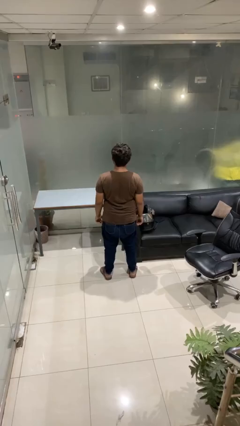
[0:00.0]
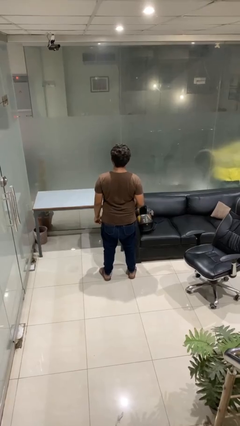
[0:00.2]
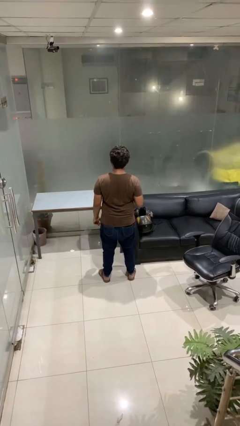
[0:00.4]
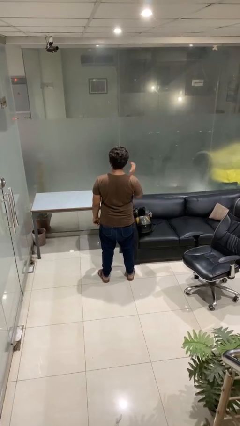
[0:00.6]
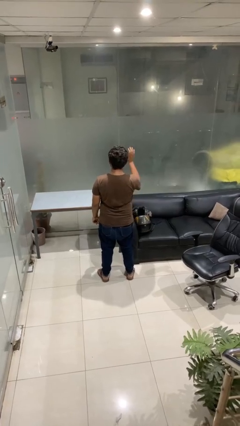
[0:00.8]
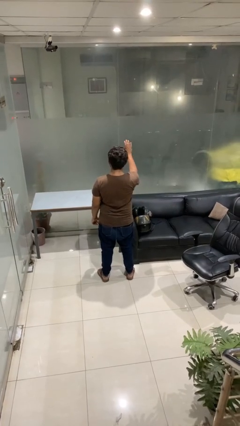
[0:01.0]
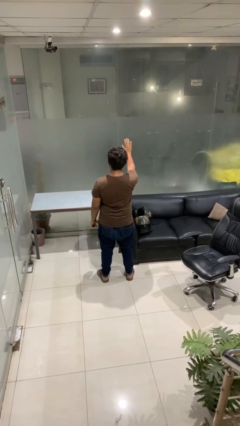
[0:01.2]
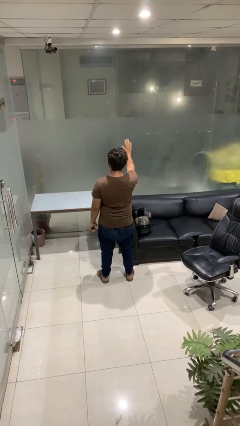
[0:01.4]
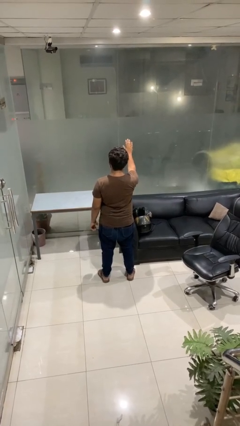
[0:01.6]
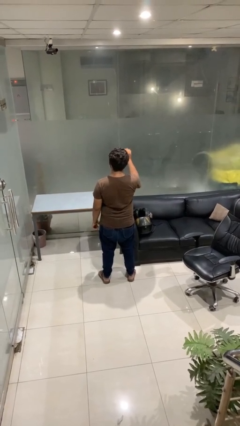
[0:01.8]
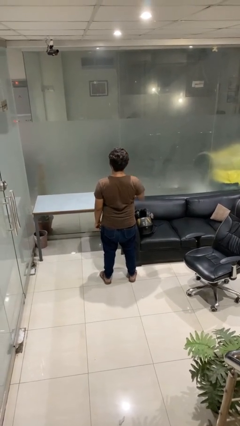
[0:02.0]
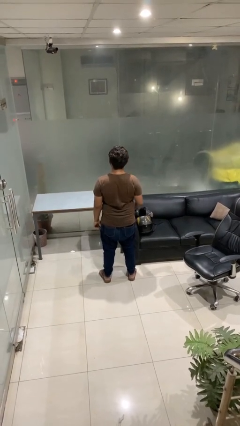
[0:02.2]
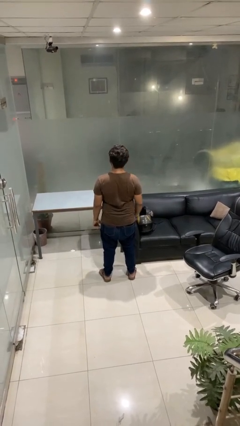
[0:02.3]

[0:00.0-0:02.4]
person gestures stop

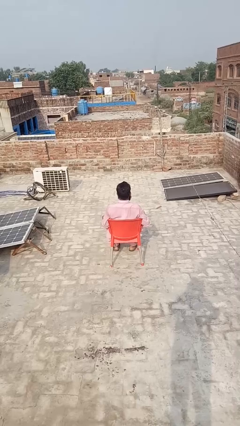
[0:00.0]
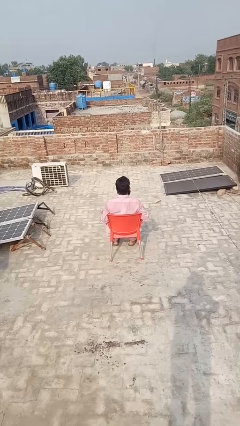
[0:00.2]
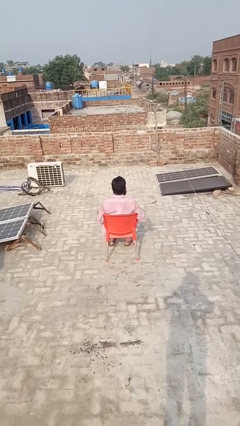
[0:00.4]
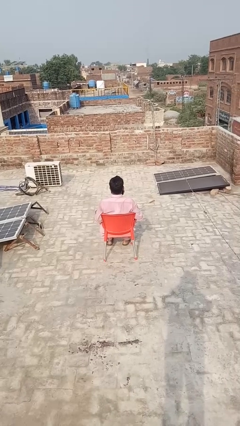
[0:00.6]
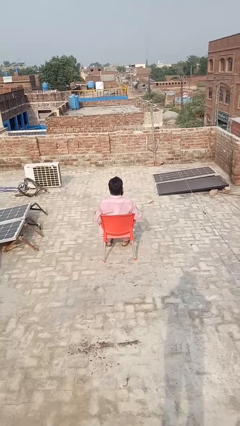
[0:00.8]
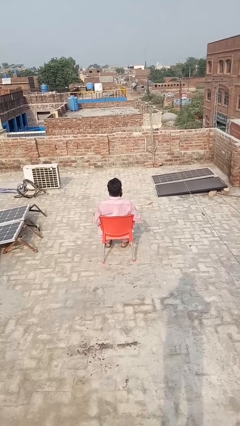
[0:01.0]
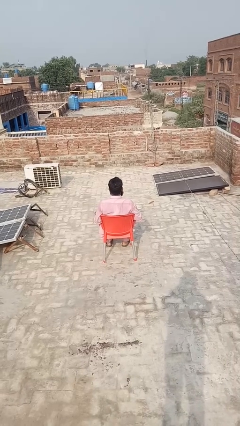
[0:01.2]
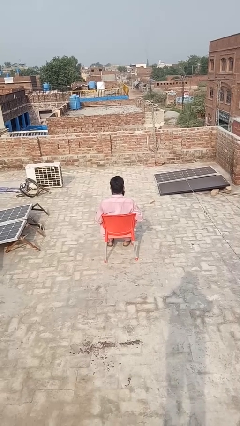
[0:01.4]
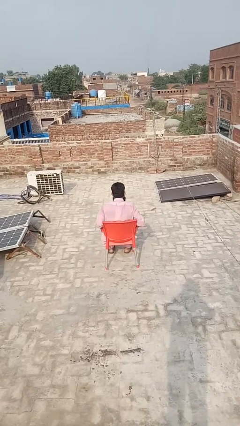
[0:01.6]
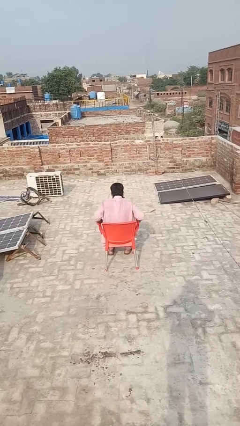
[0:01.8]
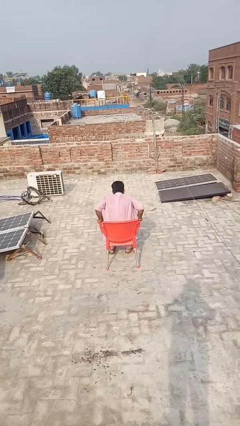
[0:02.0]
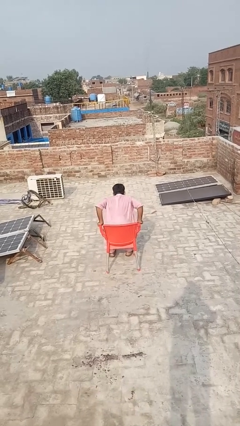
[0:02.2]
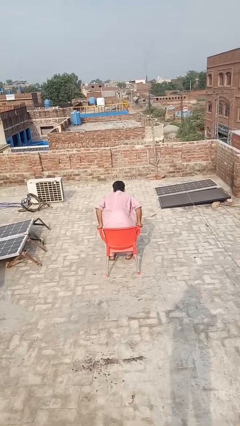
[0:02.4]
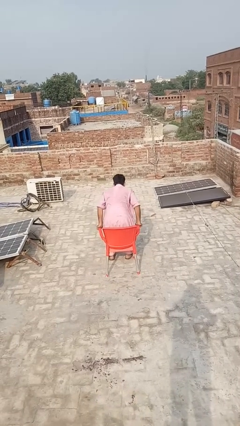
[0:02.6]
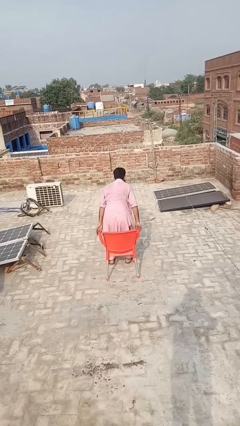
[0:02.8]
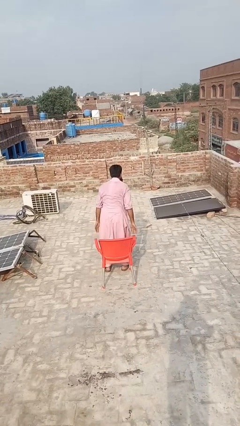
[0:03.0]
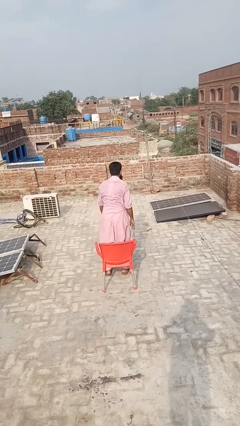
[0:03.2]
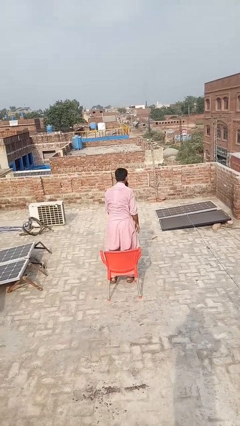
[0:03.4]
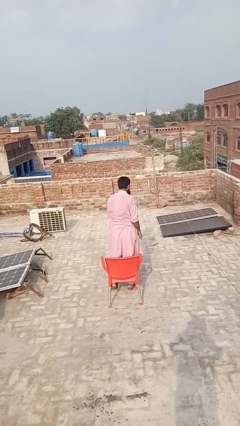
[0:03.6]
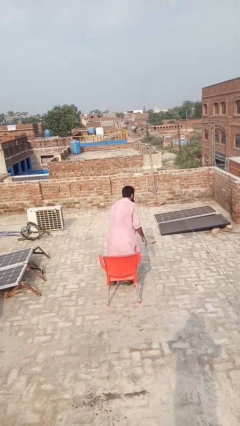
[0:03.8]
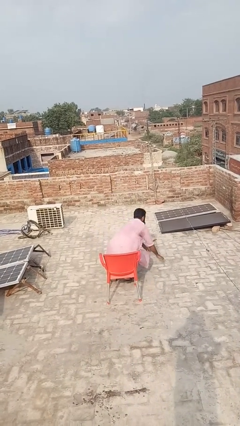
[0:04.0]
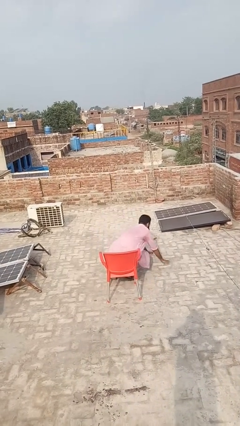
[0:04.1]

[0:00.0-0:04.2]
person falls from chair

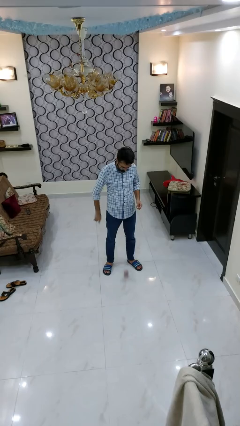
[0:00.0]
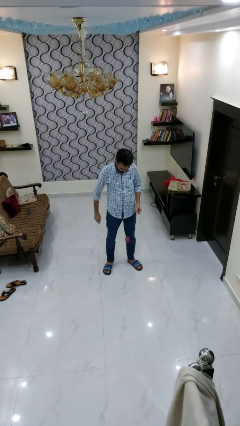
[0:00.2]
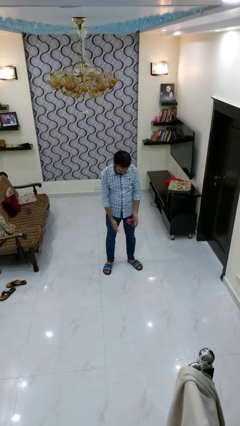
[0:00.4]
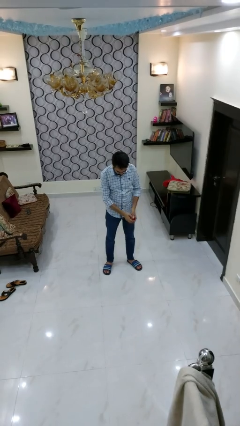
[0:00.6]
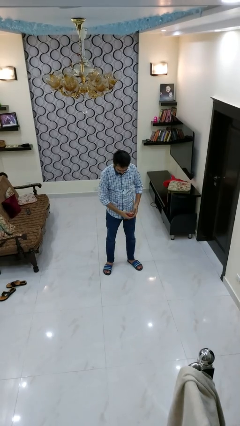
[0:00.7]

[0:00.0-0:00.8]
person bounces ball on floor

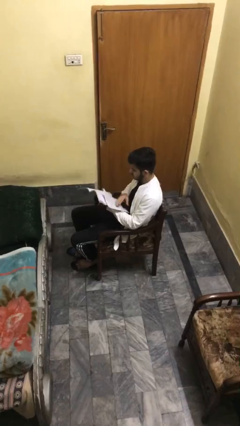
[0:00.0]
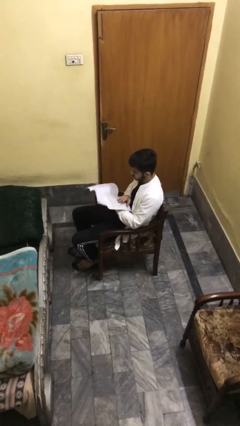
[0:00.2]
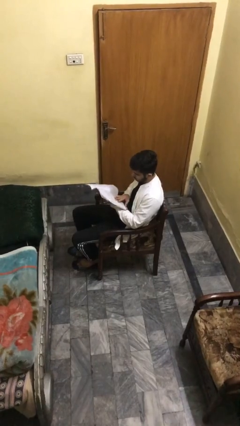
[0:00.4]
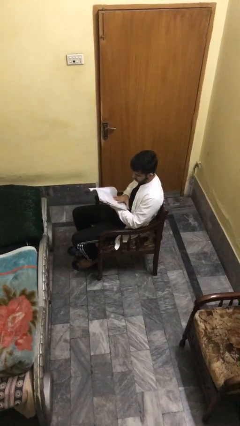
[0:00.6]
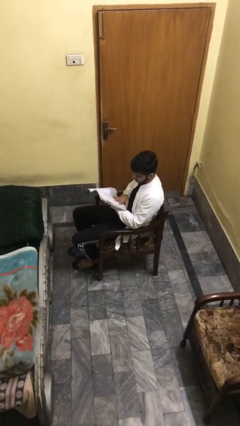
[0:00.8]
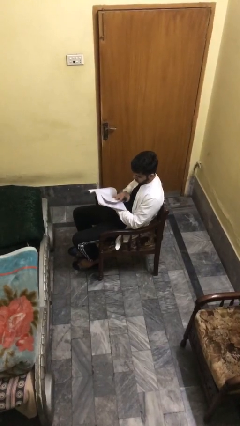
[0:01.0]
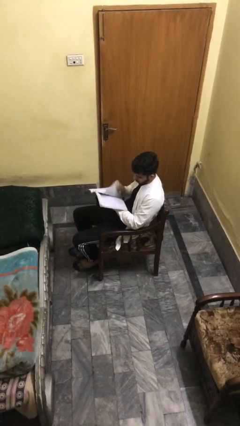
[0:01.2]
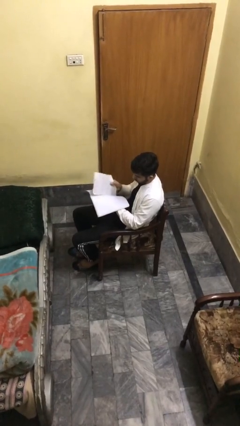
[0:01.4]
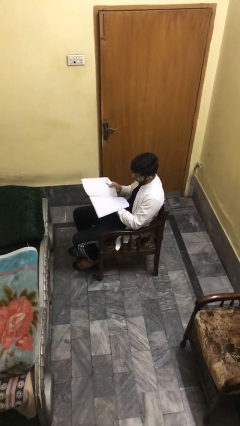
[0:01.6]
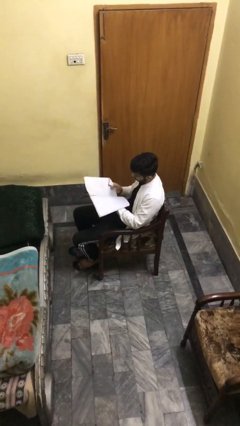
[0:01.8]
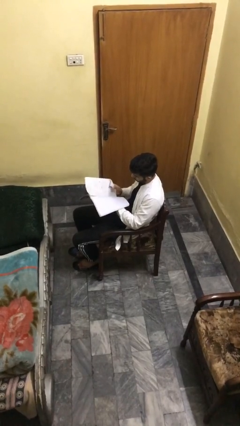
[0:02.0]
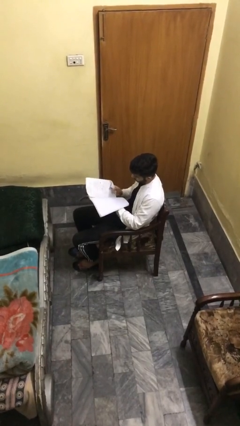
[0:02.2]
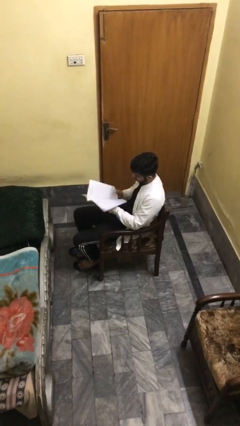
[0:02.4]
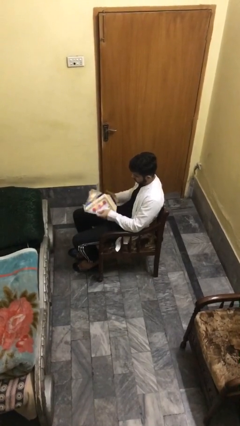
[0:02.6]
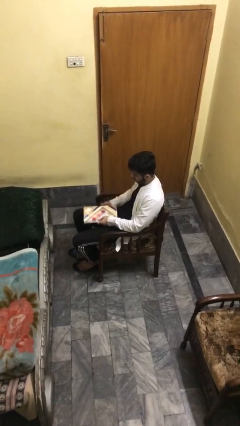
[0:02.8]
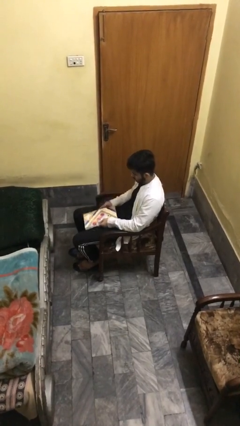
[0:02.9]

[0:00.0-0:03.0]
person reads document

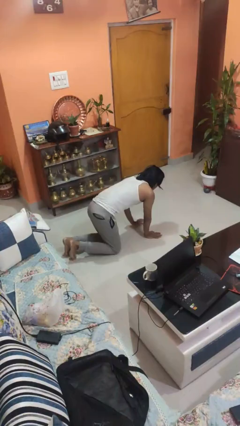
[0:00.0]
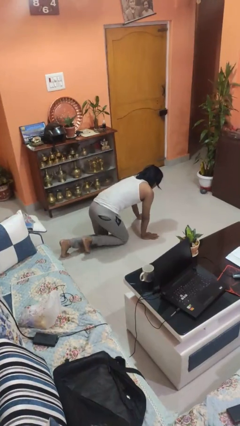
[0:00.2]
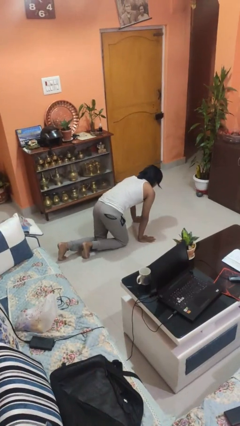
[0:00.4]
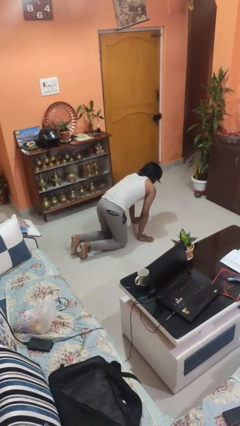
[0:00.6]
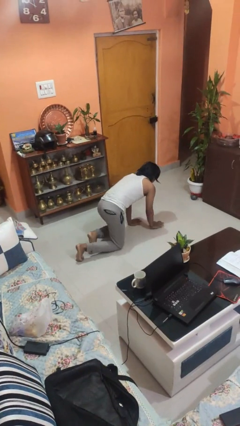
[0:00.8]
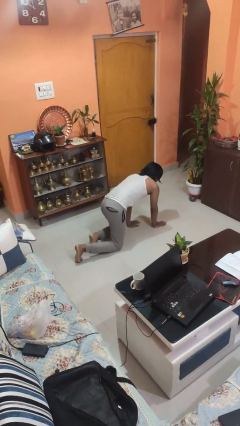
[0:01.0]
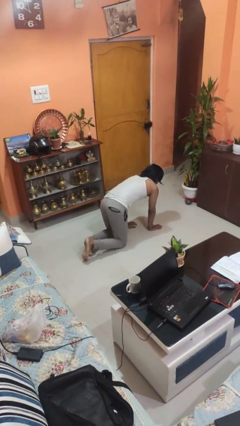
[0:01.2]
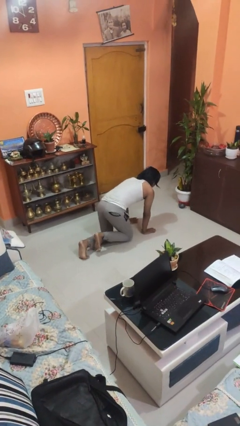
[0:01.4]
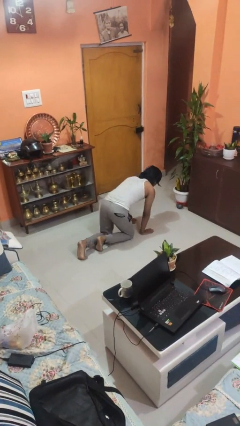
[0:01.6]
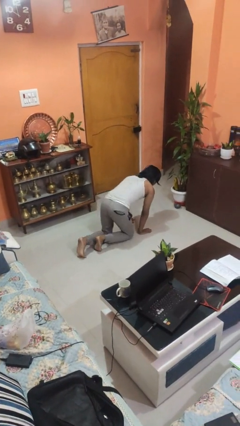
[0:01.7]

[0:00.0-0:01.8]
person crawls

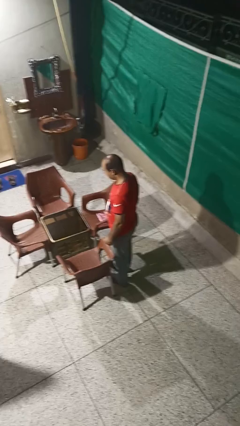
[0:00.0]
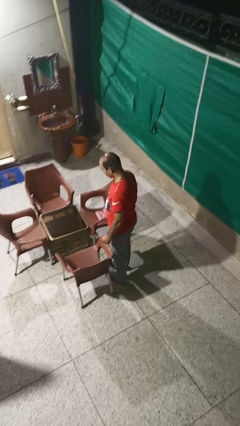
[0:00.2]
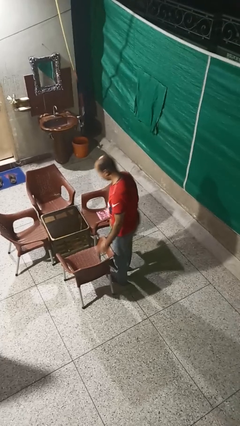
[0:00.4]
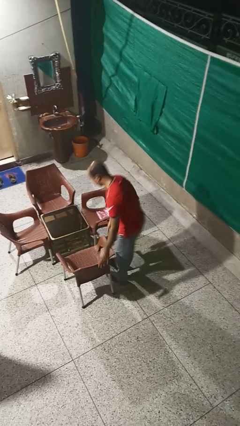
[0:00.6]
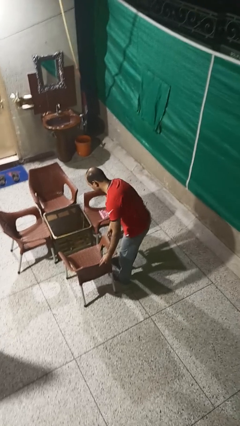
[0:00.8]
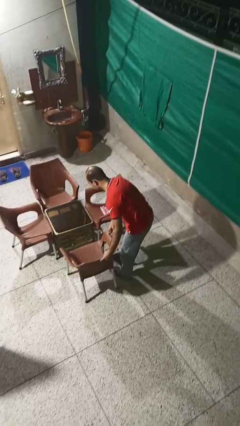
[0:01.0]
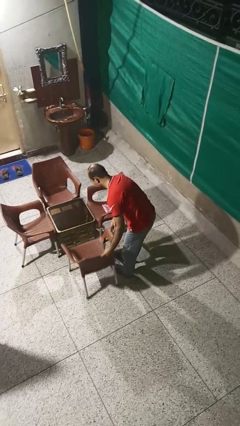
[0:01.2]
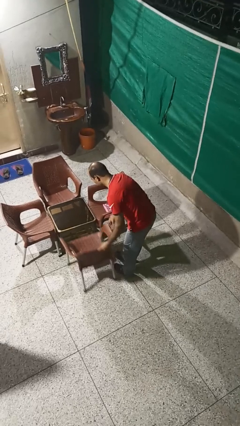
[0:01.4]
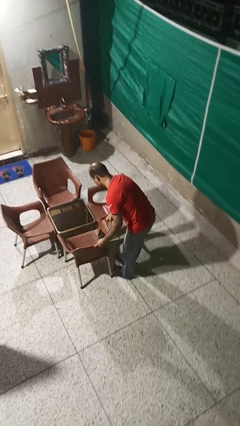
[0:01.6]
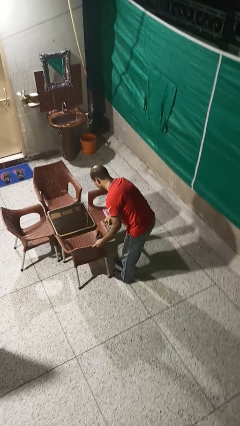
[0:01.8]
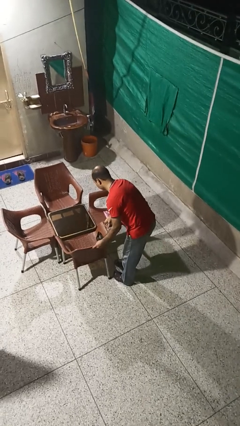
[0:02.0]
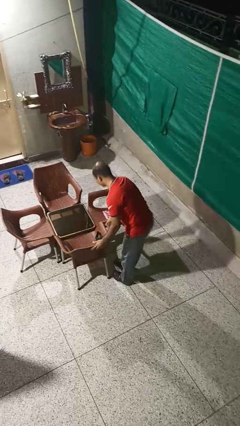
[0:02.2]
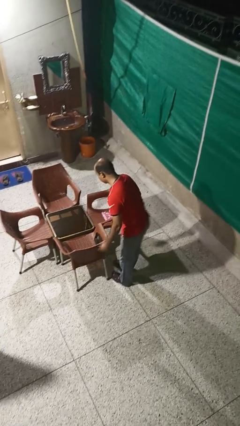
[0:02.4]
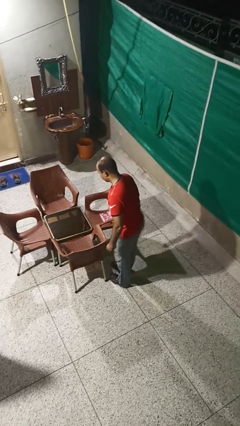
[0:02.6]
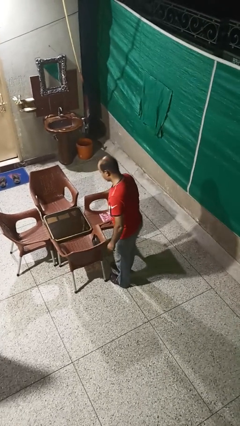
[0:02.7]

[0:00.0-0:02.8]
person pushes in chair

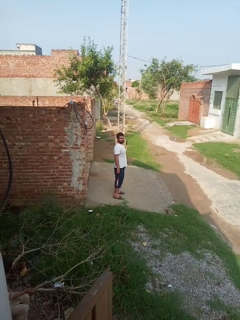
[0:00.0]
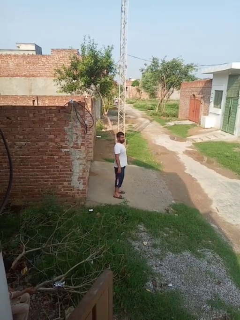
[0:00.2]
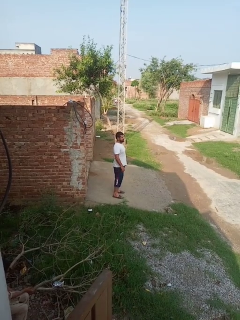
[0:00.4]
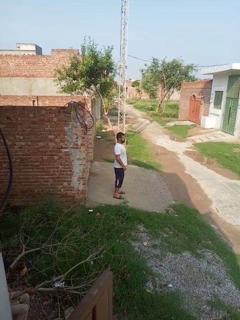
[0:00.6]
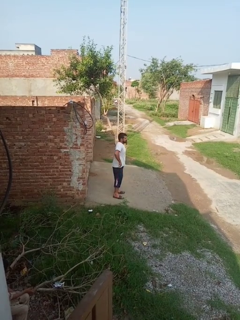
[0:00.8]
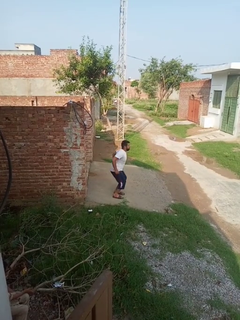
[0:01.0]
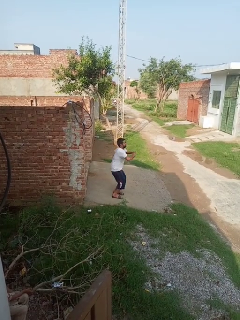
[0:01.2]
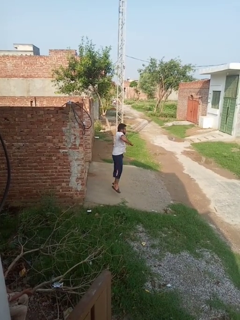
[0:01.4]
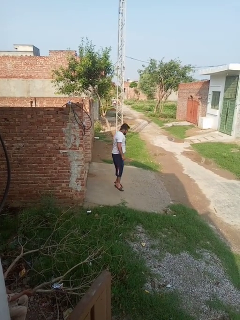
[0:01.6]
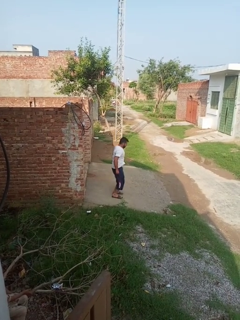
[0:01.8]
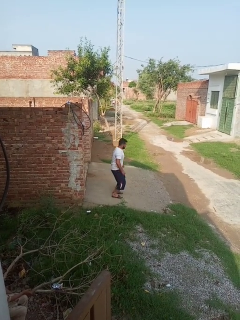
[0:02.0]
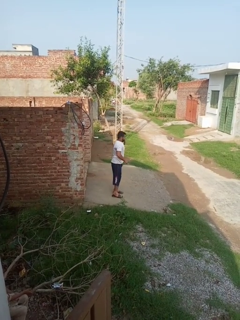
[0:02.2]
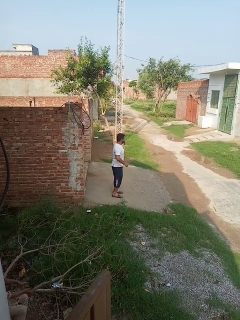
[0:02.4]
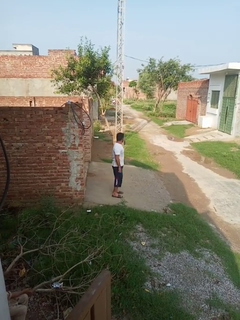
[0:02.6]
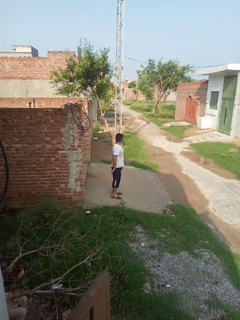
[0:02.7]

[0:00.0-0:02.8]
person jumps

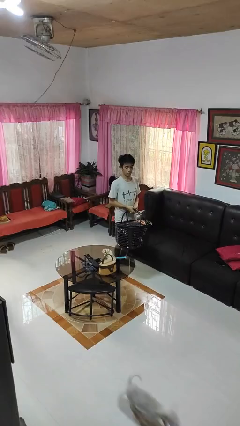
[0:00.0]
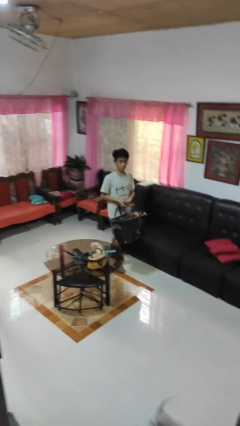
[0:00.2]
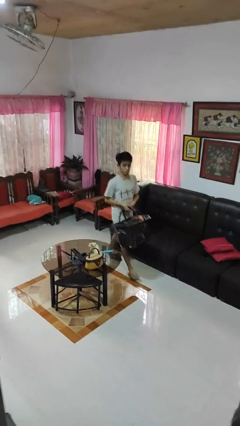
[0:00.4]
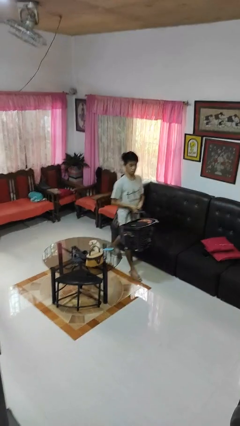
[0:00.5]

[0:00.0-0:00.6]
person carries laundry basket
